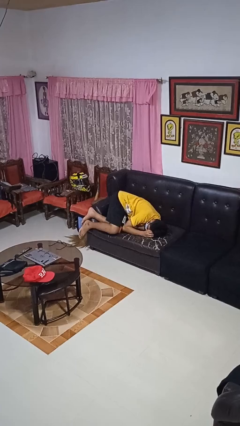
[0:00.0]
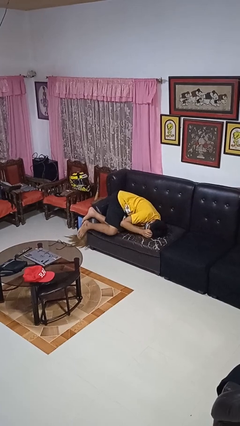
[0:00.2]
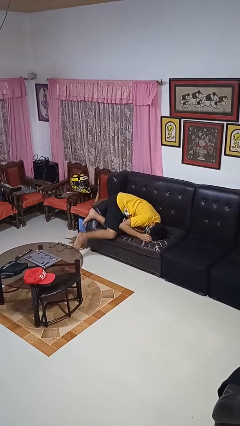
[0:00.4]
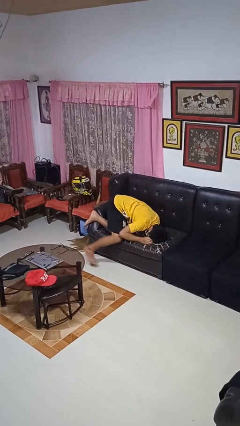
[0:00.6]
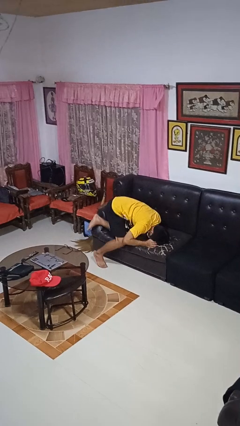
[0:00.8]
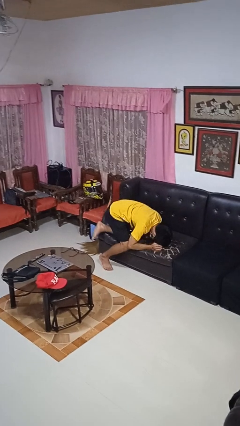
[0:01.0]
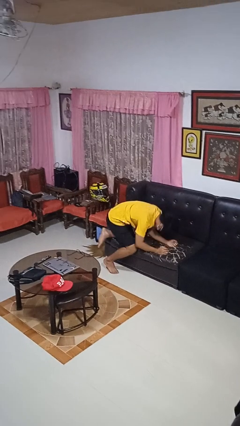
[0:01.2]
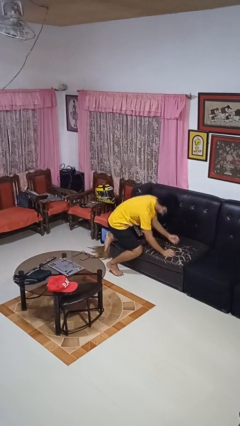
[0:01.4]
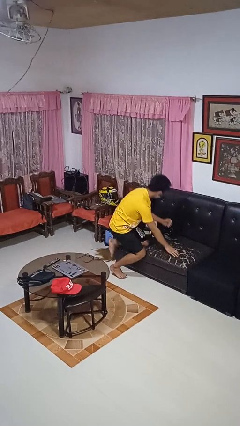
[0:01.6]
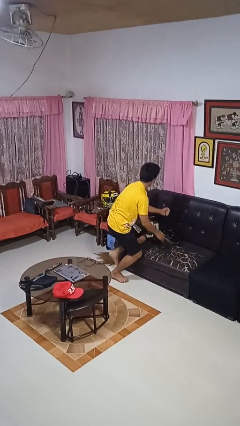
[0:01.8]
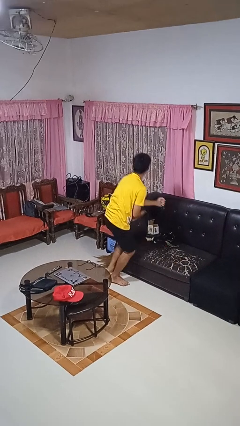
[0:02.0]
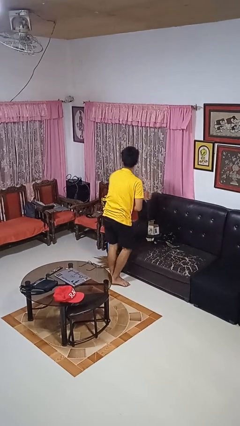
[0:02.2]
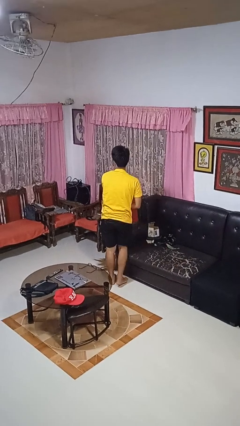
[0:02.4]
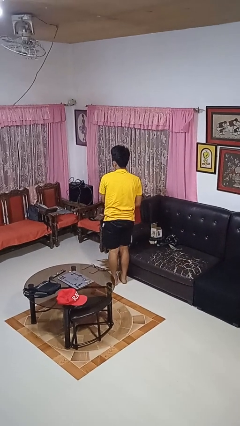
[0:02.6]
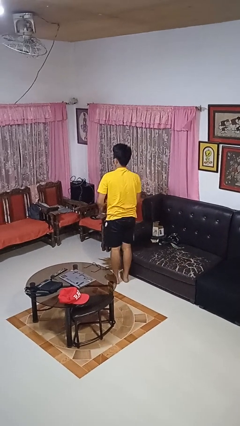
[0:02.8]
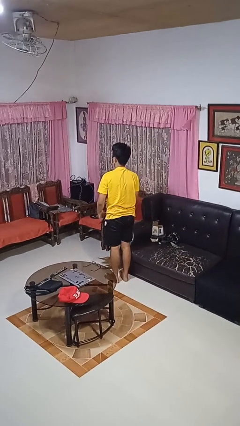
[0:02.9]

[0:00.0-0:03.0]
person stands up

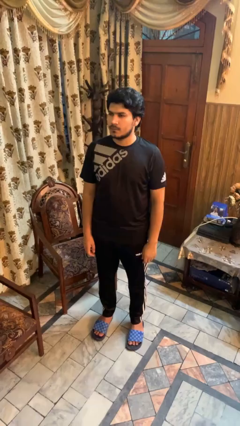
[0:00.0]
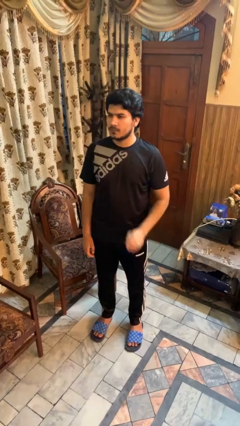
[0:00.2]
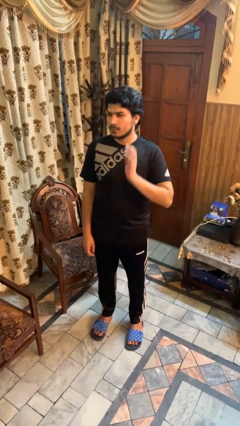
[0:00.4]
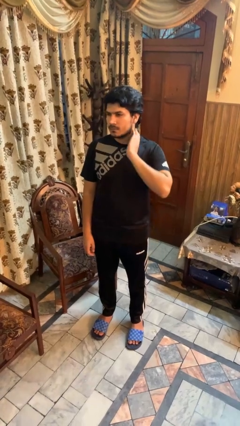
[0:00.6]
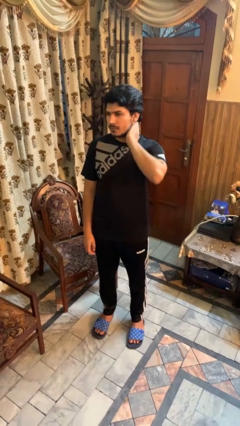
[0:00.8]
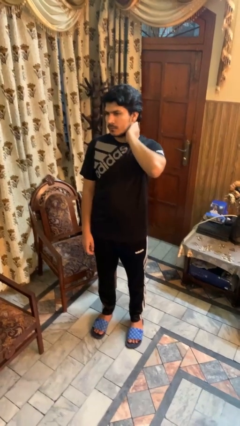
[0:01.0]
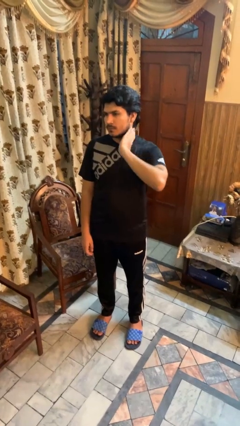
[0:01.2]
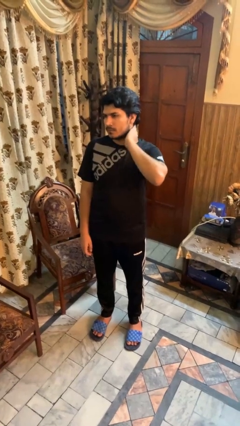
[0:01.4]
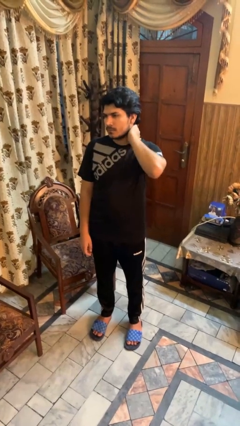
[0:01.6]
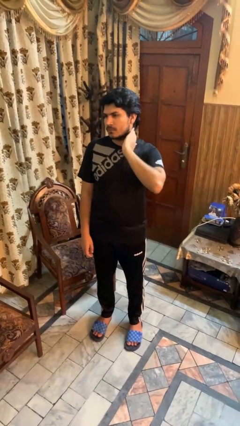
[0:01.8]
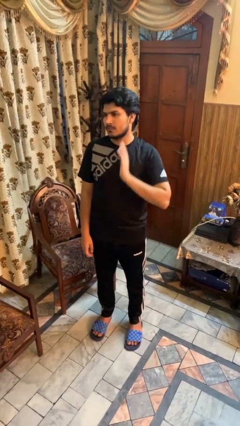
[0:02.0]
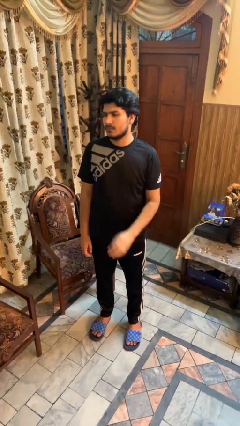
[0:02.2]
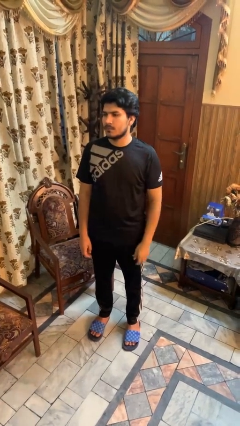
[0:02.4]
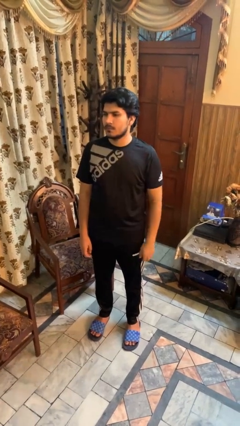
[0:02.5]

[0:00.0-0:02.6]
person rubs neck

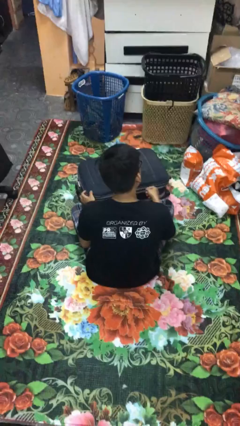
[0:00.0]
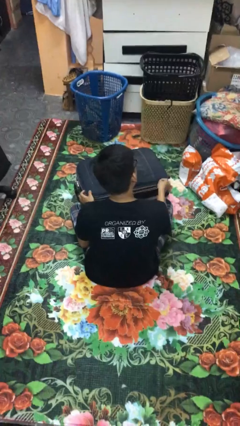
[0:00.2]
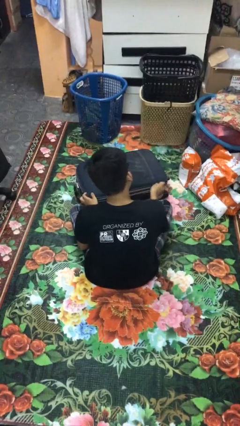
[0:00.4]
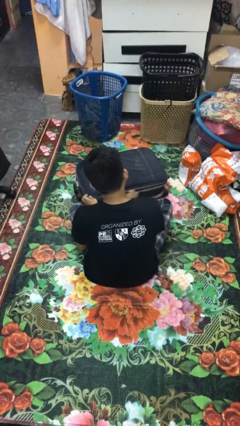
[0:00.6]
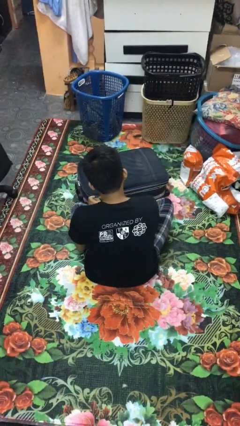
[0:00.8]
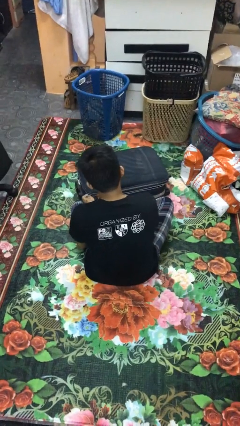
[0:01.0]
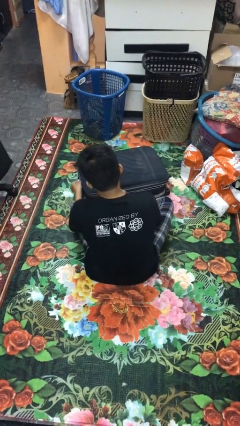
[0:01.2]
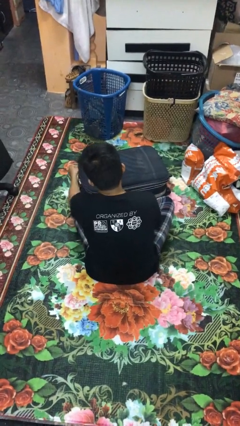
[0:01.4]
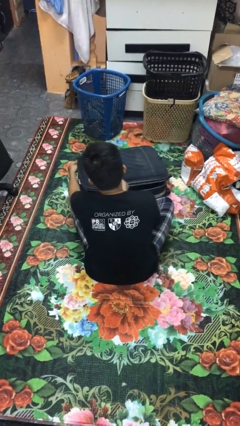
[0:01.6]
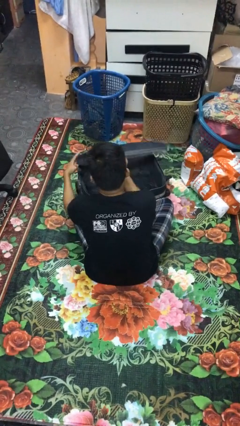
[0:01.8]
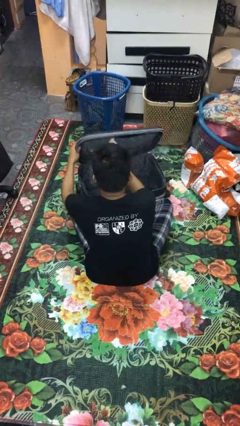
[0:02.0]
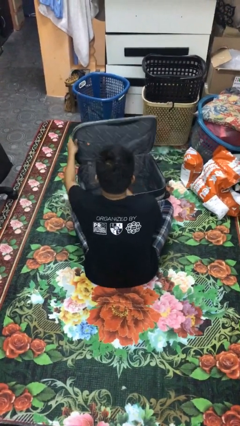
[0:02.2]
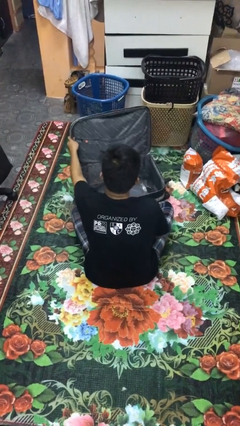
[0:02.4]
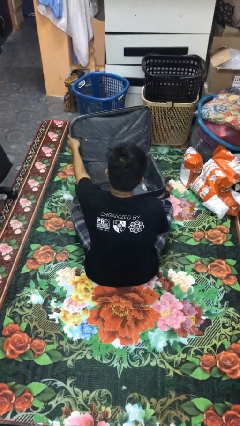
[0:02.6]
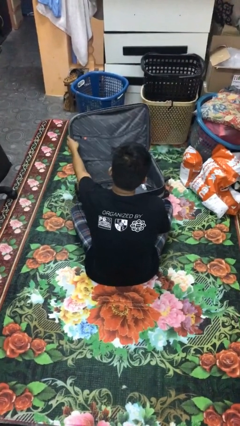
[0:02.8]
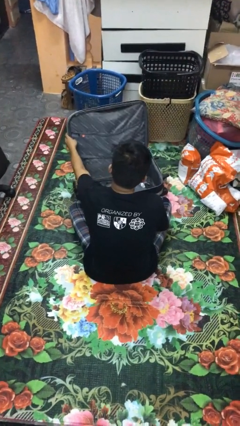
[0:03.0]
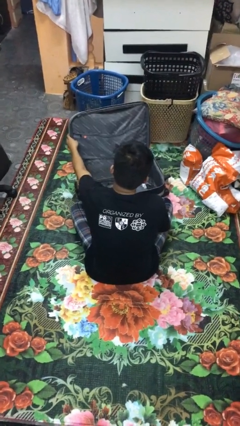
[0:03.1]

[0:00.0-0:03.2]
person opens suitcase

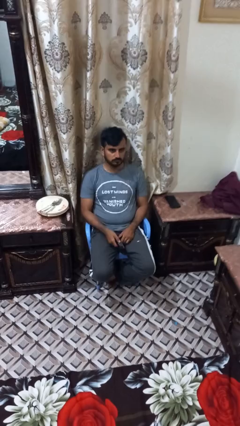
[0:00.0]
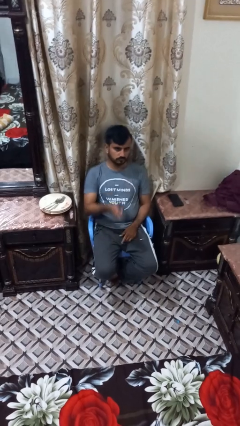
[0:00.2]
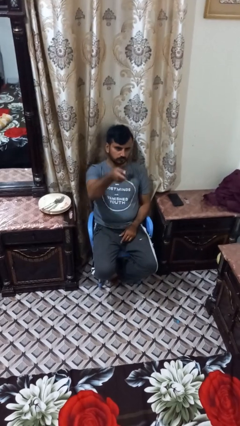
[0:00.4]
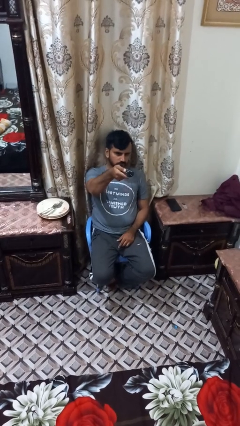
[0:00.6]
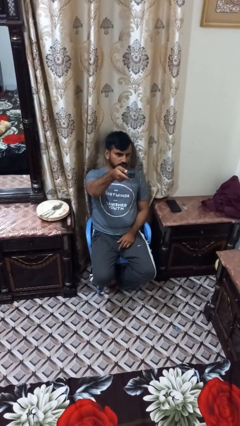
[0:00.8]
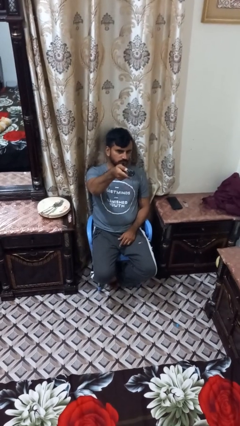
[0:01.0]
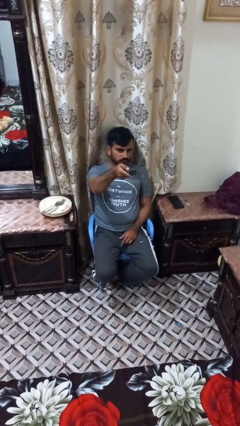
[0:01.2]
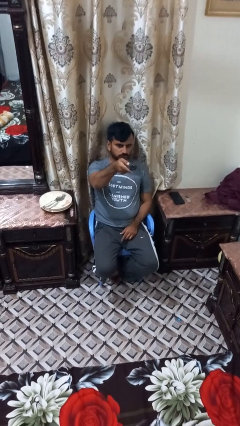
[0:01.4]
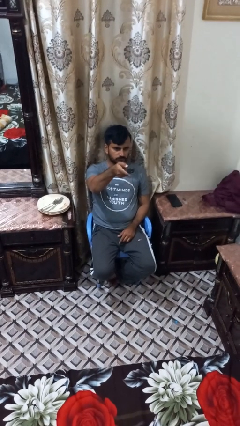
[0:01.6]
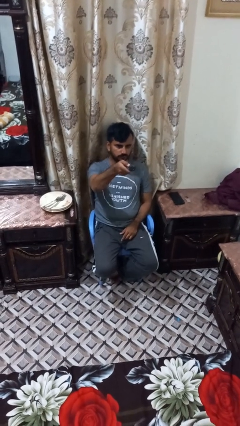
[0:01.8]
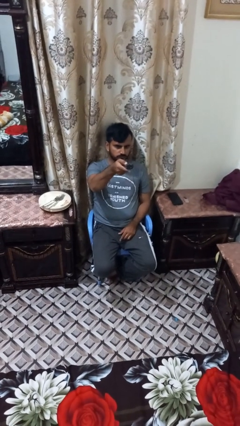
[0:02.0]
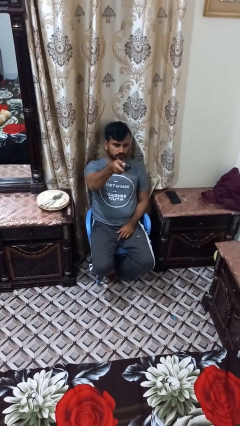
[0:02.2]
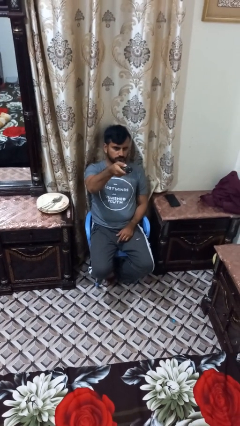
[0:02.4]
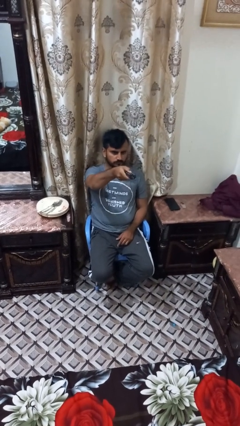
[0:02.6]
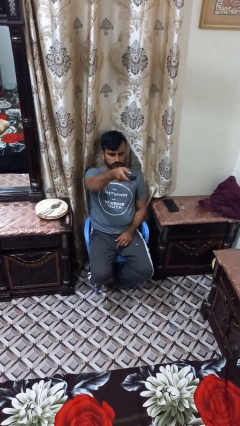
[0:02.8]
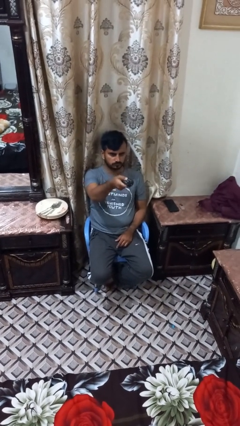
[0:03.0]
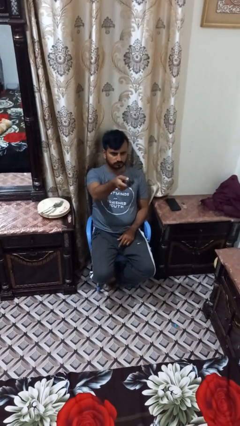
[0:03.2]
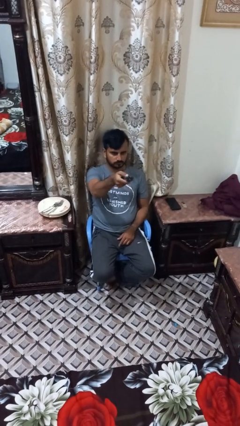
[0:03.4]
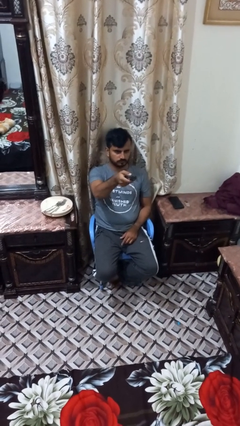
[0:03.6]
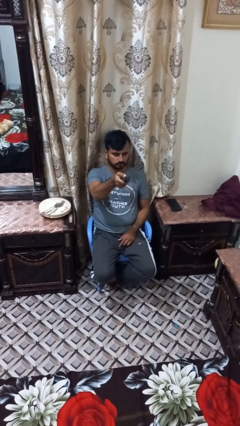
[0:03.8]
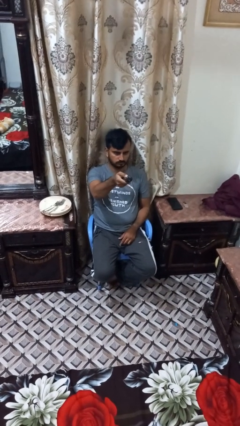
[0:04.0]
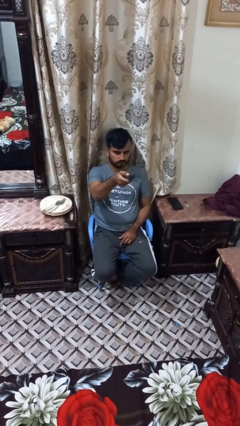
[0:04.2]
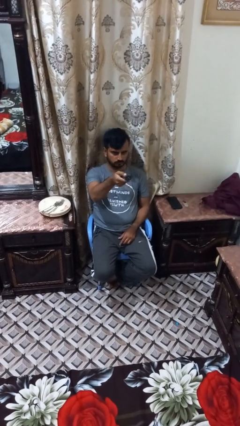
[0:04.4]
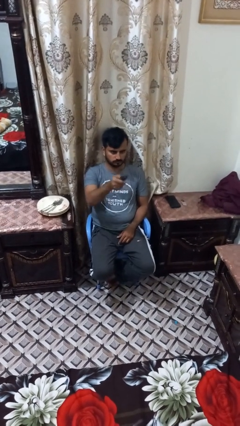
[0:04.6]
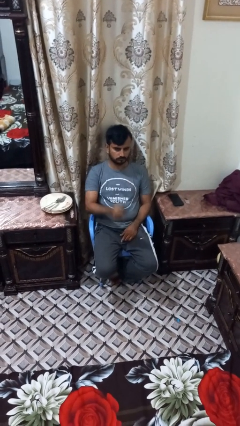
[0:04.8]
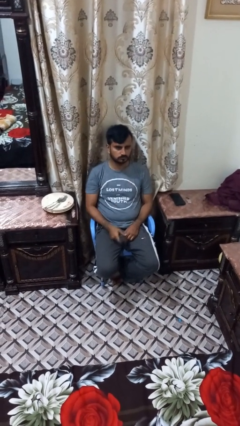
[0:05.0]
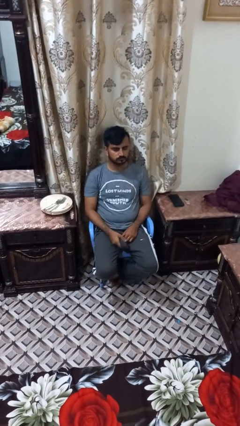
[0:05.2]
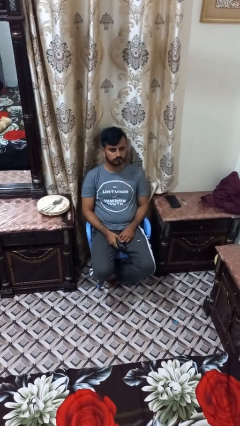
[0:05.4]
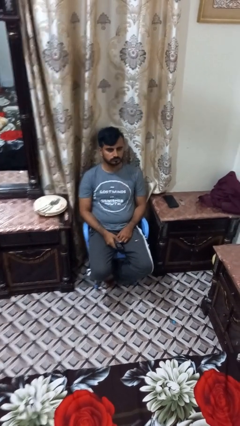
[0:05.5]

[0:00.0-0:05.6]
person uses television remote

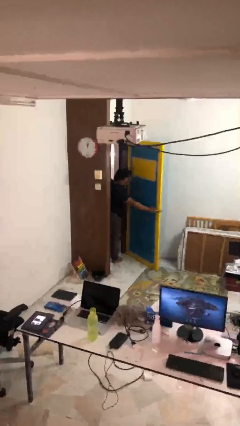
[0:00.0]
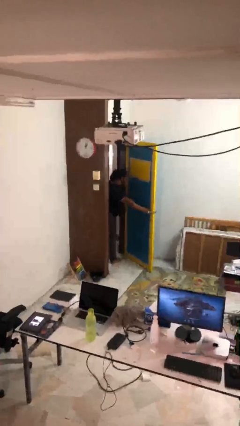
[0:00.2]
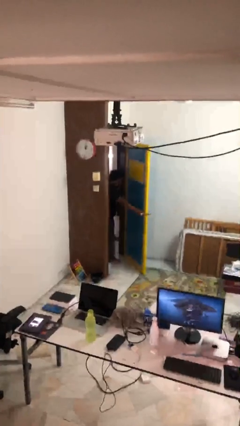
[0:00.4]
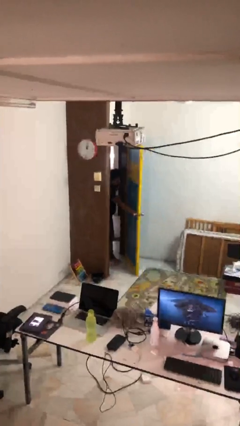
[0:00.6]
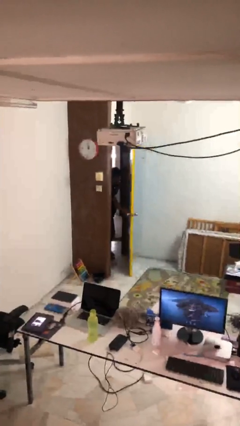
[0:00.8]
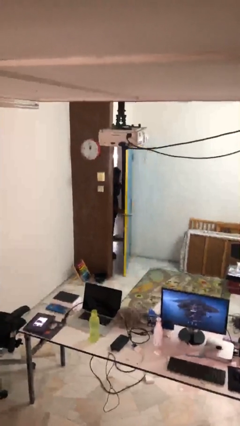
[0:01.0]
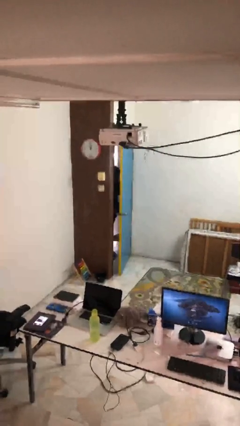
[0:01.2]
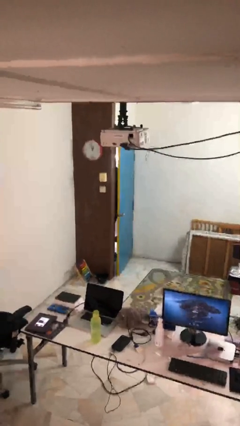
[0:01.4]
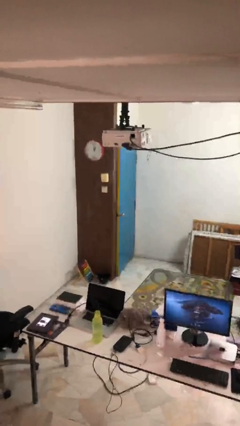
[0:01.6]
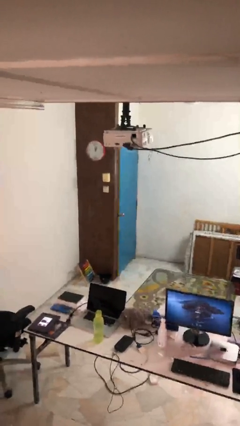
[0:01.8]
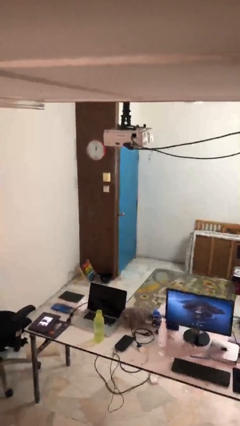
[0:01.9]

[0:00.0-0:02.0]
person closes facility door

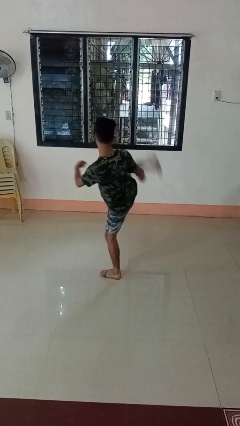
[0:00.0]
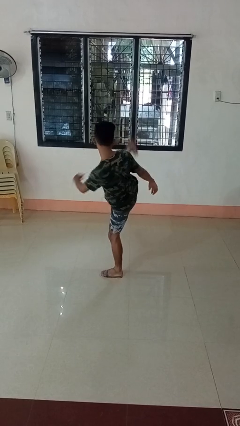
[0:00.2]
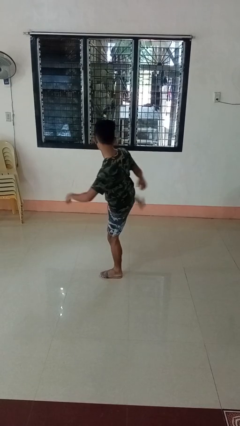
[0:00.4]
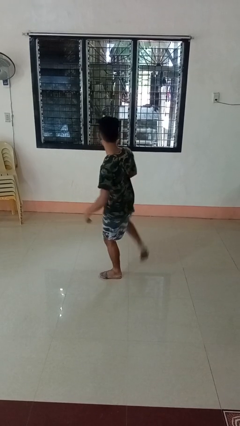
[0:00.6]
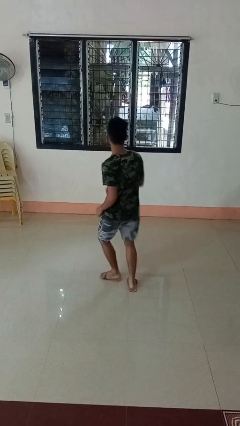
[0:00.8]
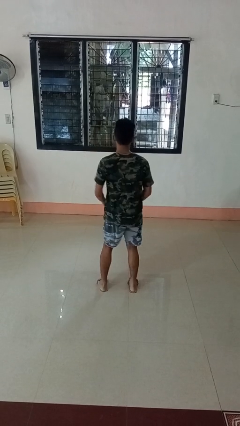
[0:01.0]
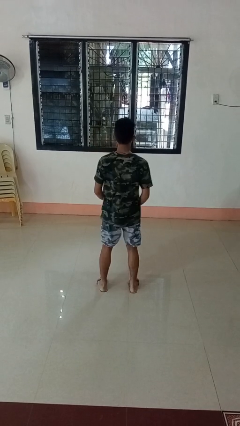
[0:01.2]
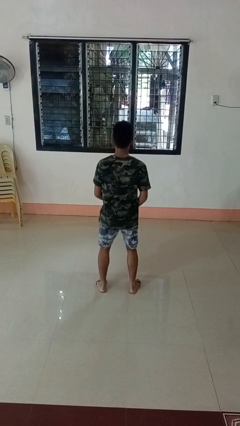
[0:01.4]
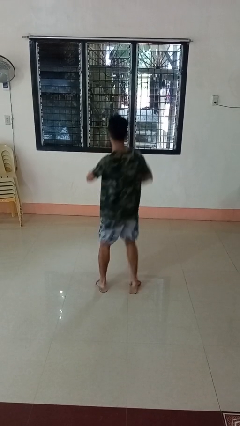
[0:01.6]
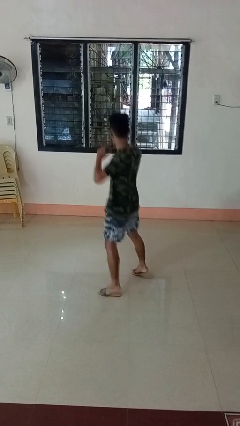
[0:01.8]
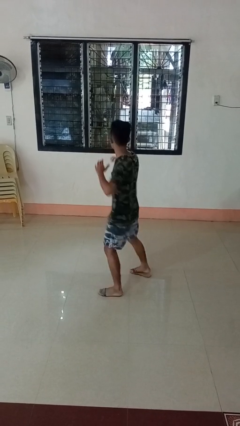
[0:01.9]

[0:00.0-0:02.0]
person karate kicks
